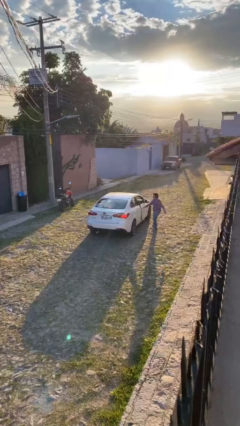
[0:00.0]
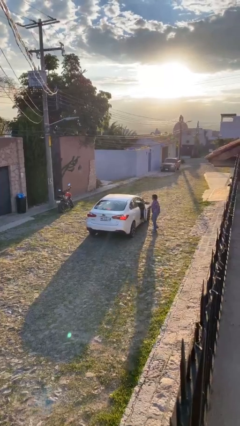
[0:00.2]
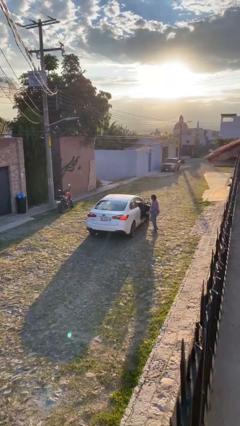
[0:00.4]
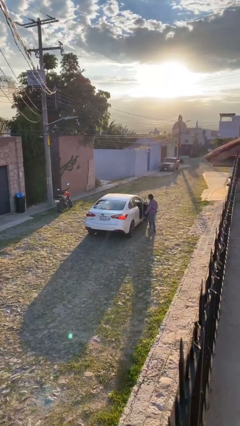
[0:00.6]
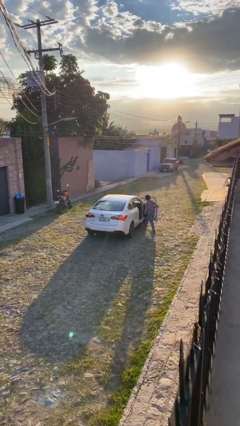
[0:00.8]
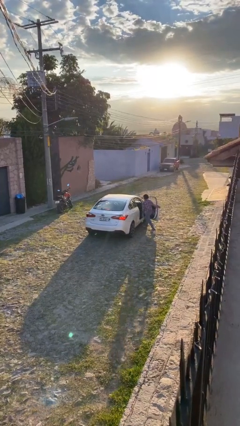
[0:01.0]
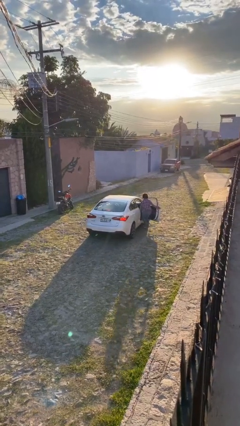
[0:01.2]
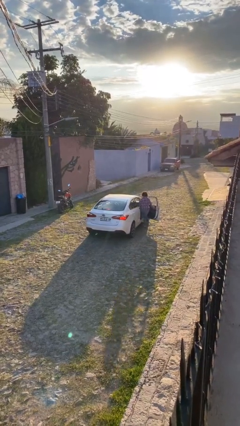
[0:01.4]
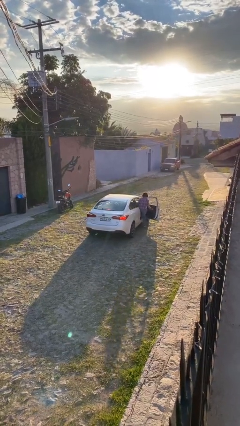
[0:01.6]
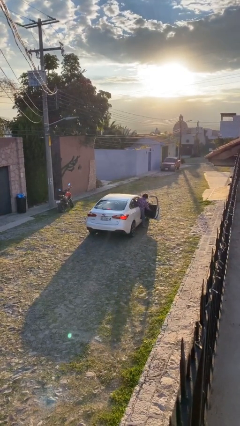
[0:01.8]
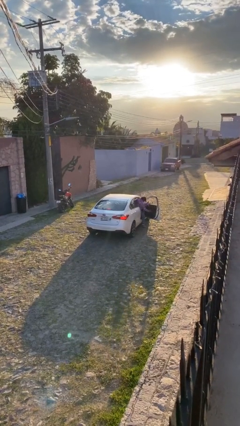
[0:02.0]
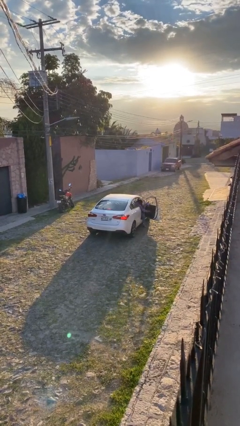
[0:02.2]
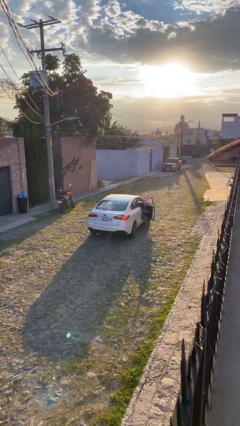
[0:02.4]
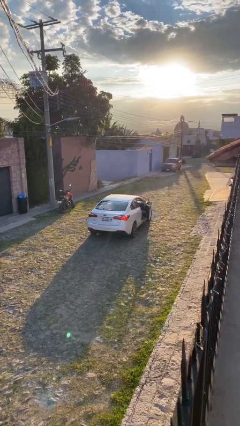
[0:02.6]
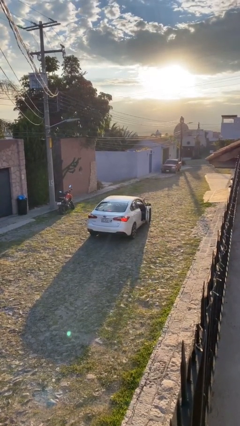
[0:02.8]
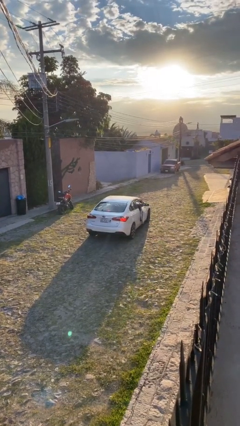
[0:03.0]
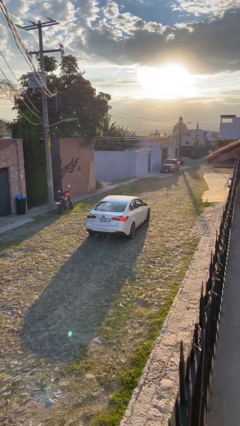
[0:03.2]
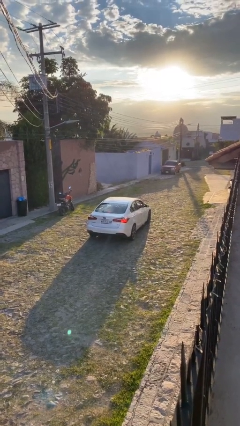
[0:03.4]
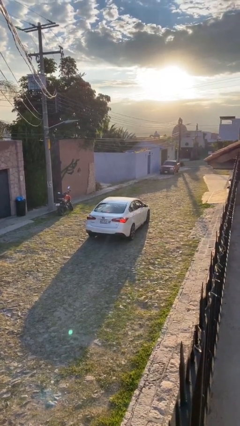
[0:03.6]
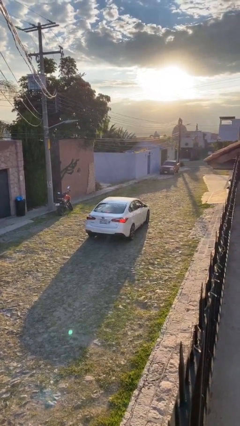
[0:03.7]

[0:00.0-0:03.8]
car picks up person

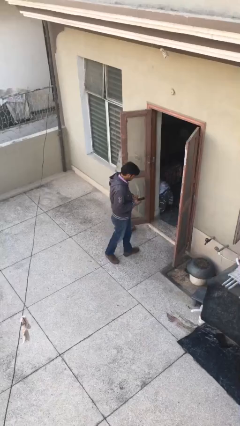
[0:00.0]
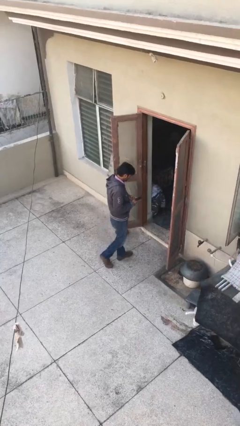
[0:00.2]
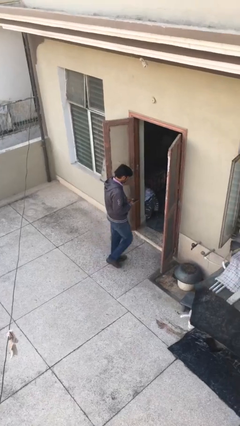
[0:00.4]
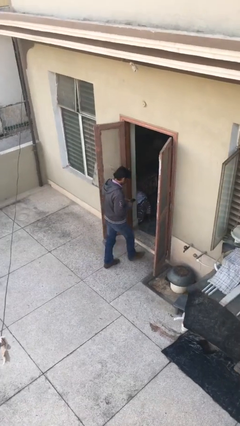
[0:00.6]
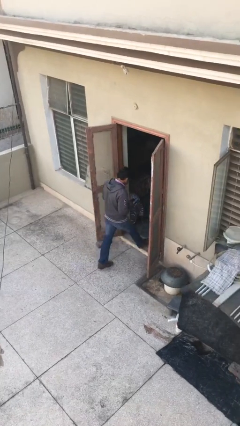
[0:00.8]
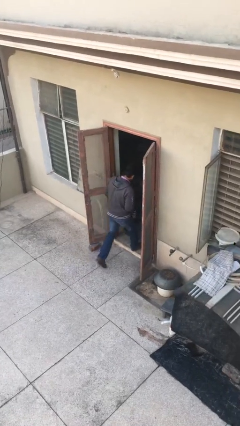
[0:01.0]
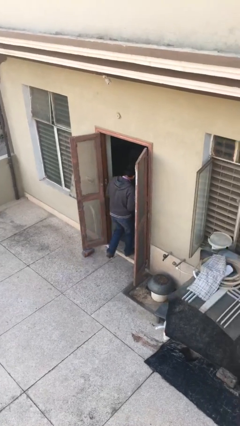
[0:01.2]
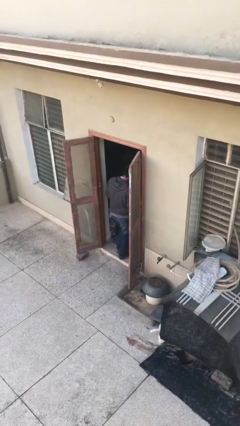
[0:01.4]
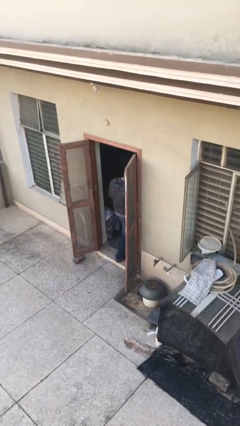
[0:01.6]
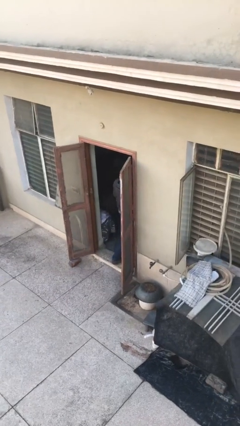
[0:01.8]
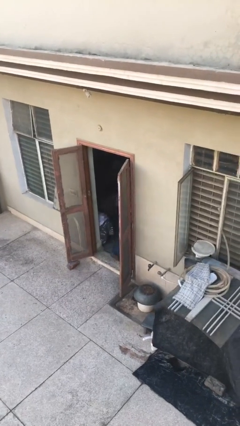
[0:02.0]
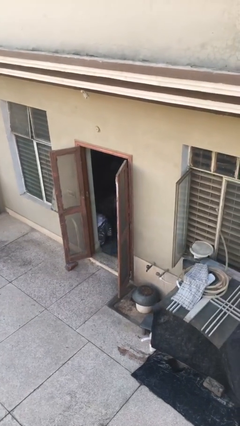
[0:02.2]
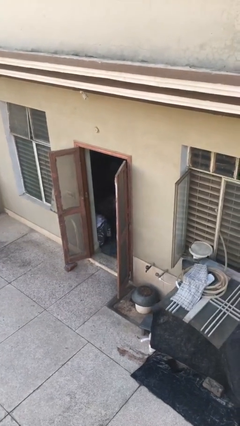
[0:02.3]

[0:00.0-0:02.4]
person exits scene through structure

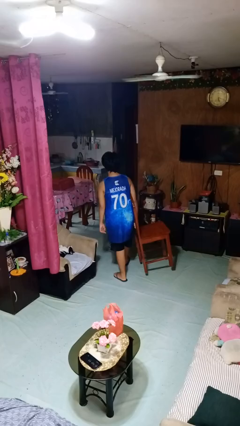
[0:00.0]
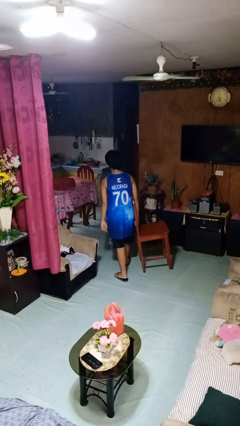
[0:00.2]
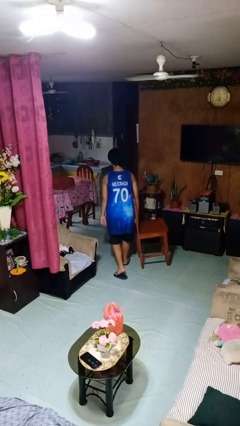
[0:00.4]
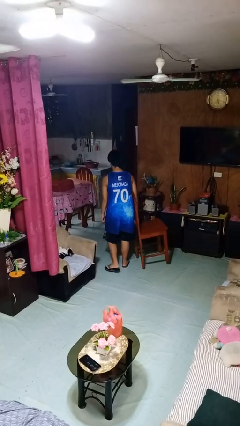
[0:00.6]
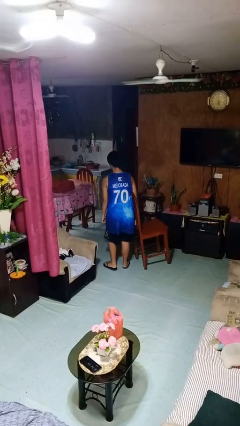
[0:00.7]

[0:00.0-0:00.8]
person carries furniture

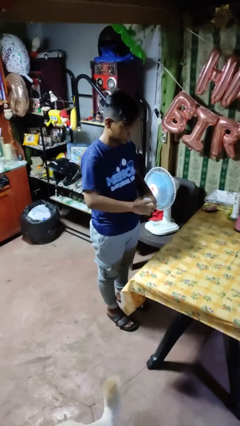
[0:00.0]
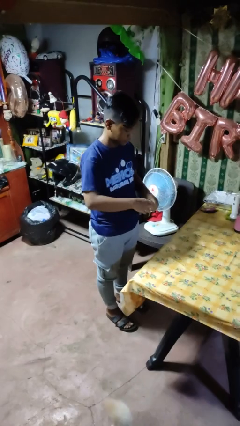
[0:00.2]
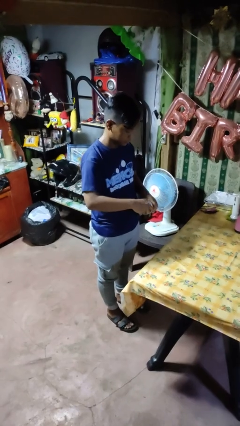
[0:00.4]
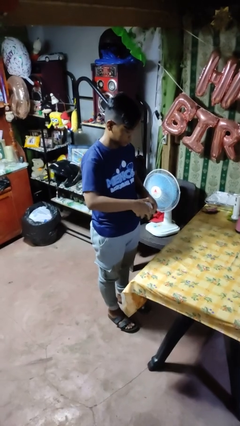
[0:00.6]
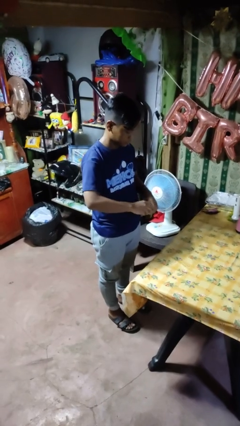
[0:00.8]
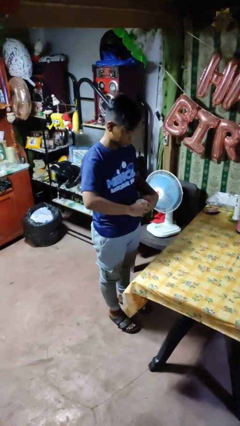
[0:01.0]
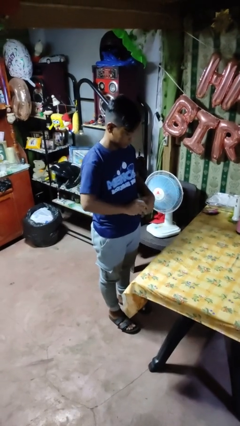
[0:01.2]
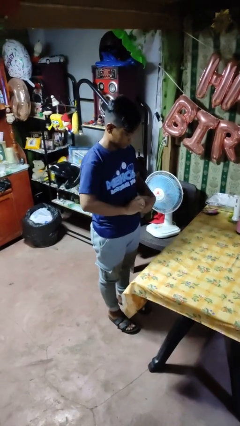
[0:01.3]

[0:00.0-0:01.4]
person opens jar

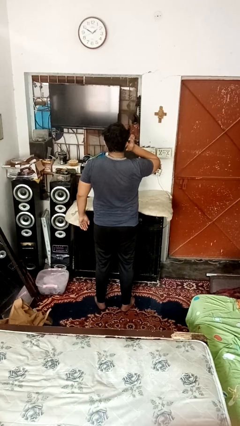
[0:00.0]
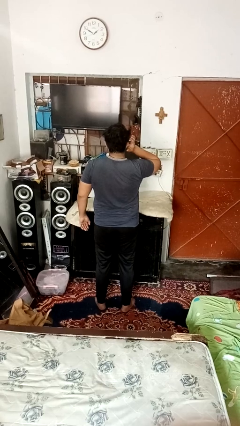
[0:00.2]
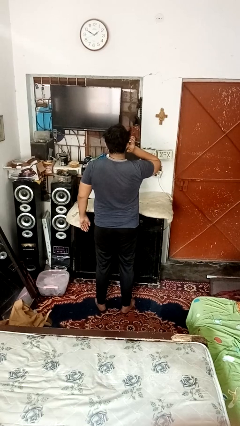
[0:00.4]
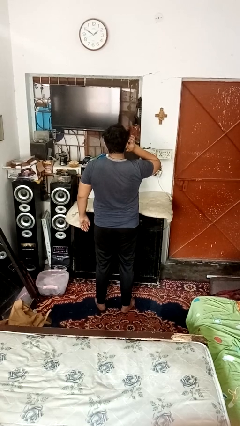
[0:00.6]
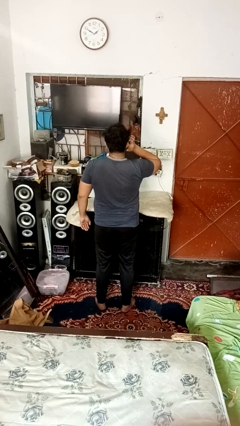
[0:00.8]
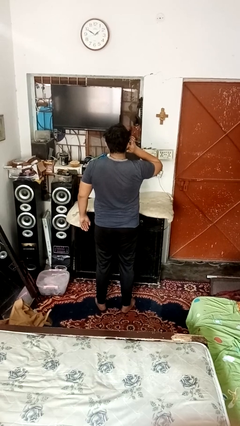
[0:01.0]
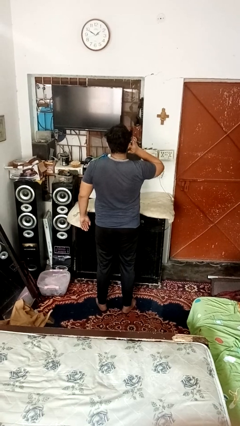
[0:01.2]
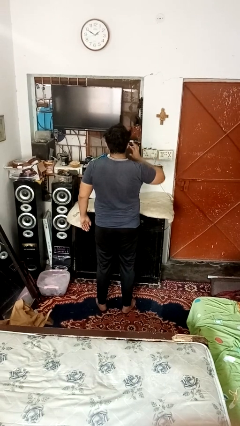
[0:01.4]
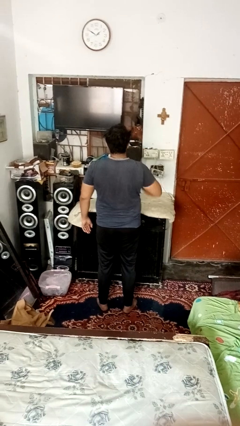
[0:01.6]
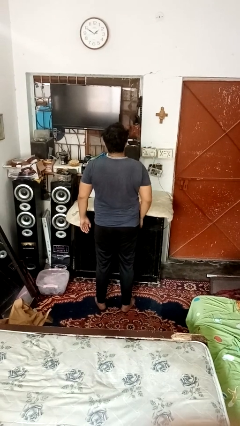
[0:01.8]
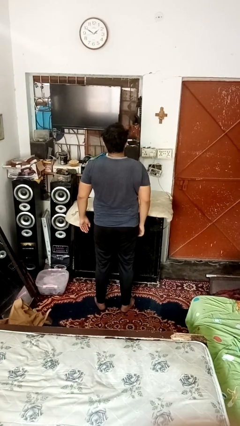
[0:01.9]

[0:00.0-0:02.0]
person puts fingers in ear

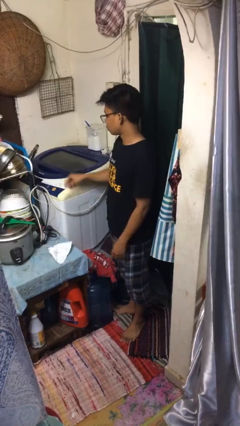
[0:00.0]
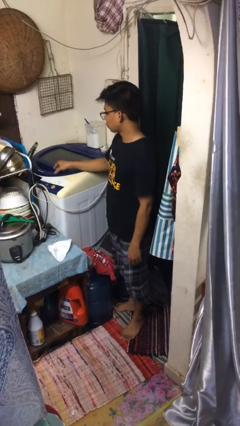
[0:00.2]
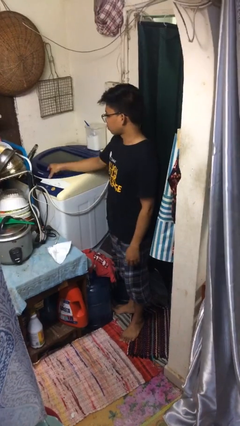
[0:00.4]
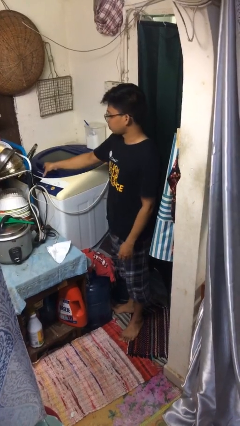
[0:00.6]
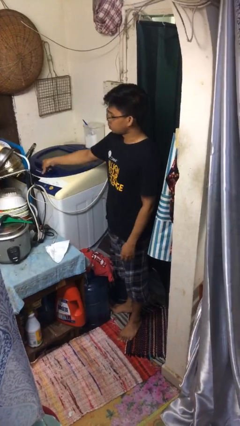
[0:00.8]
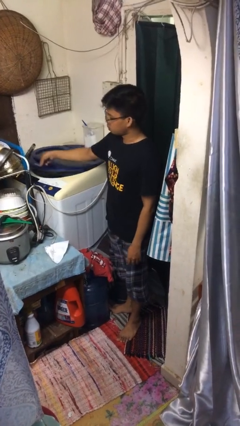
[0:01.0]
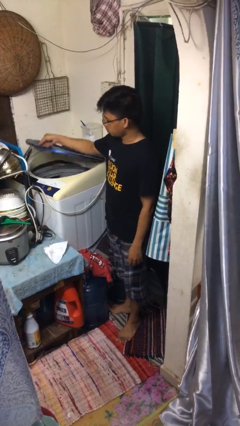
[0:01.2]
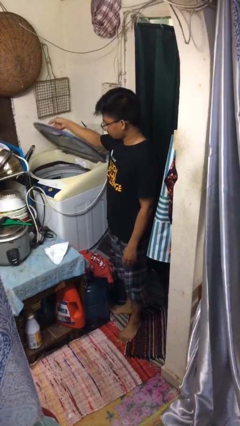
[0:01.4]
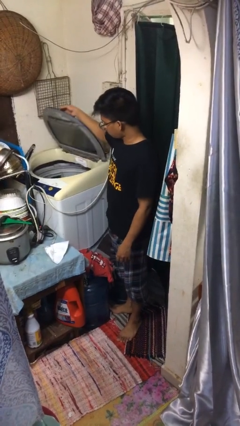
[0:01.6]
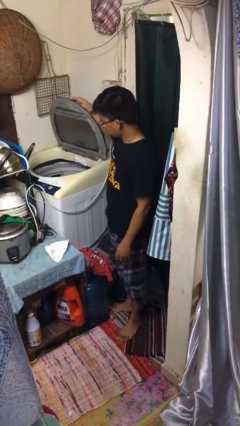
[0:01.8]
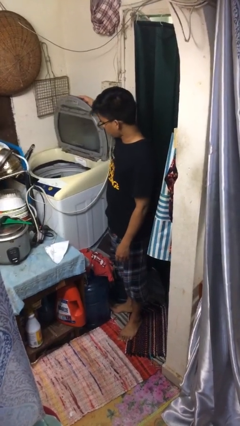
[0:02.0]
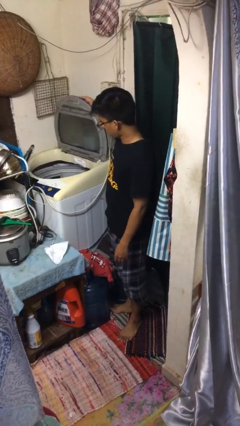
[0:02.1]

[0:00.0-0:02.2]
person opens clothes washer

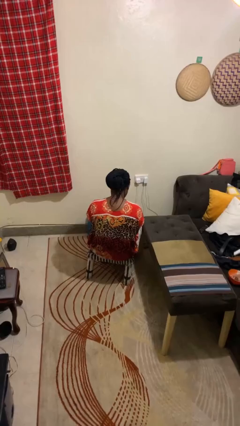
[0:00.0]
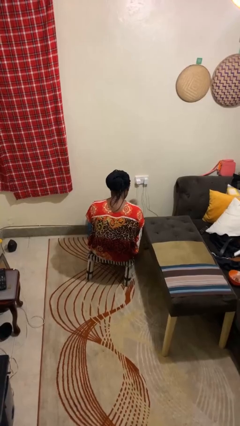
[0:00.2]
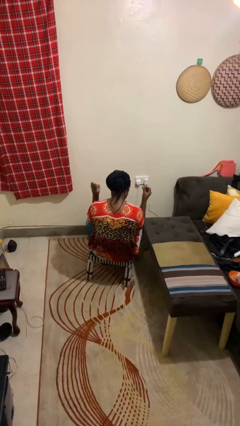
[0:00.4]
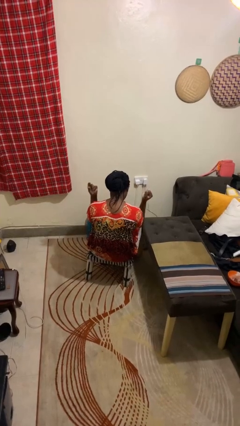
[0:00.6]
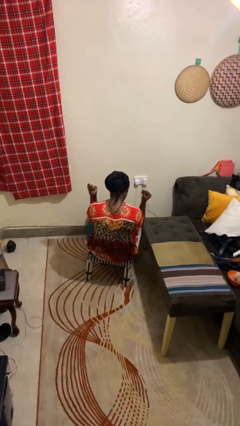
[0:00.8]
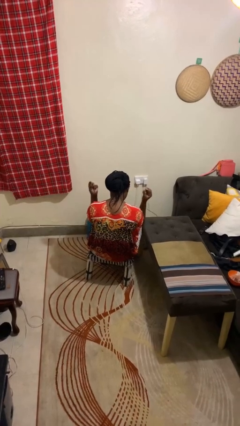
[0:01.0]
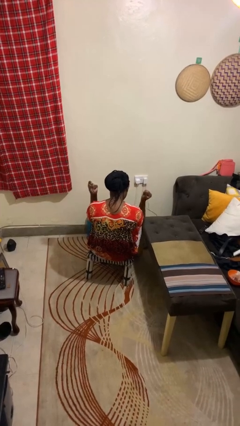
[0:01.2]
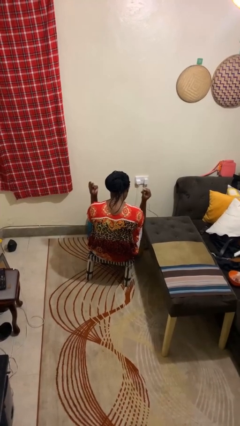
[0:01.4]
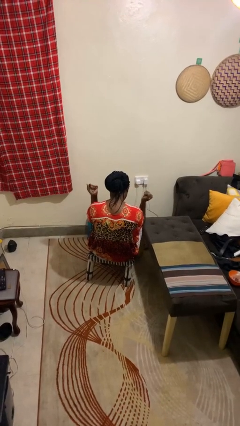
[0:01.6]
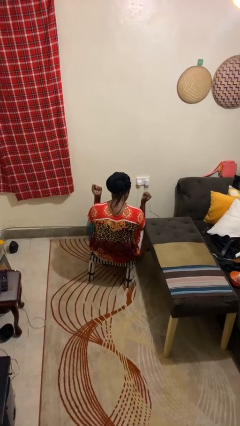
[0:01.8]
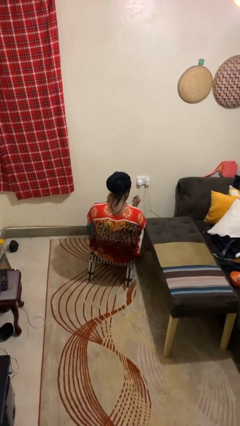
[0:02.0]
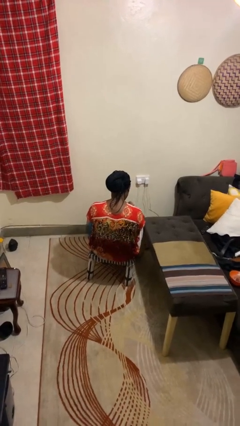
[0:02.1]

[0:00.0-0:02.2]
person snaps fingers

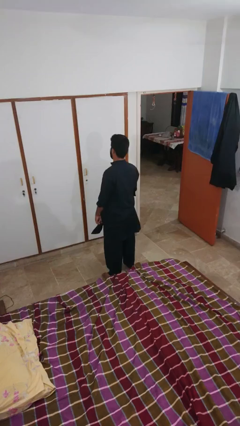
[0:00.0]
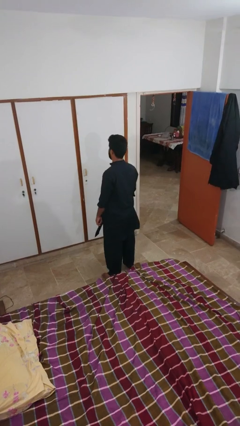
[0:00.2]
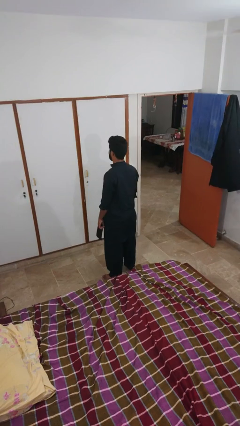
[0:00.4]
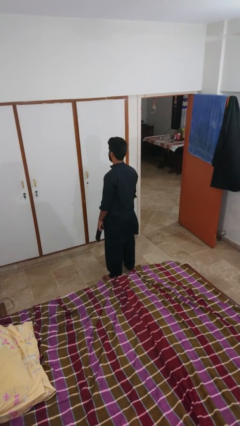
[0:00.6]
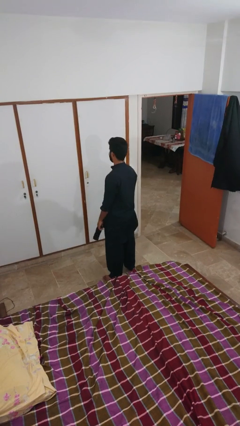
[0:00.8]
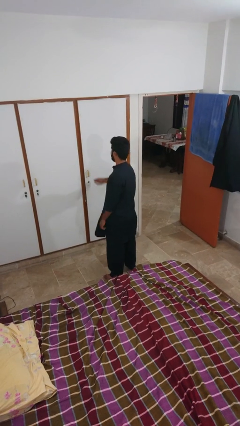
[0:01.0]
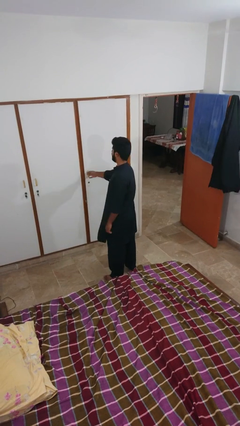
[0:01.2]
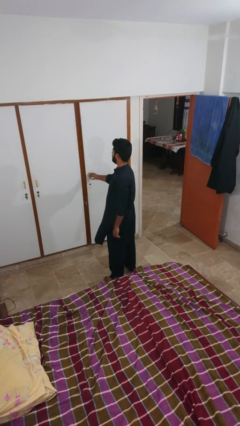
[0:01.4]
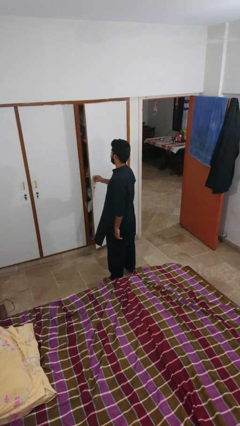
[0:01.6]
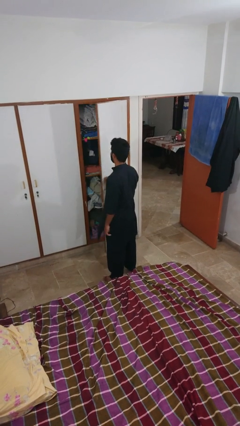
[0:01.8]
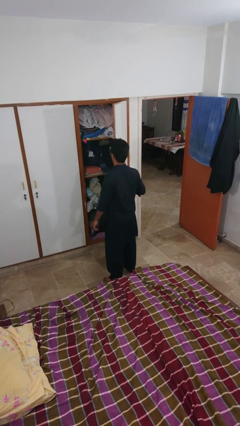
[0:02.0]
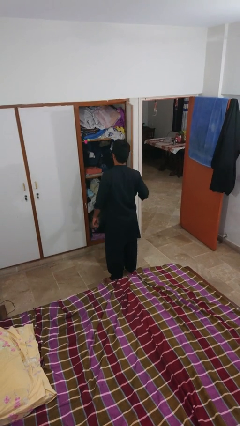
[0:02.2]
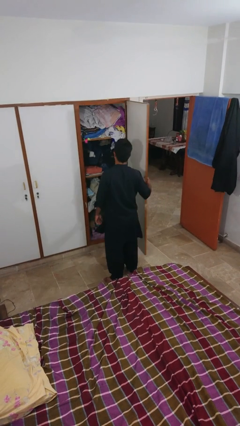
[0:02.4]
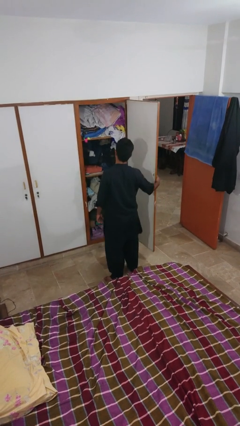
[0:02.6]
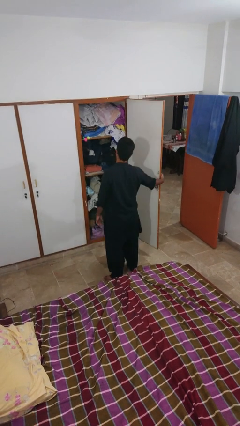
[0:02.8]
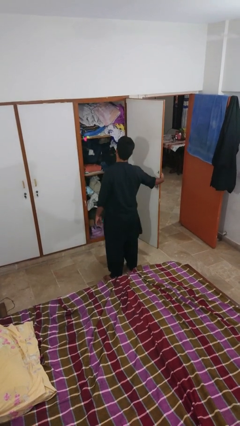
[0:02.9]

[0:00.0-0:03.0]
person opens closet door
